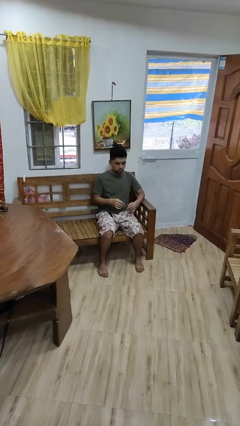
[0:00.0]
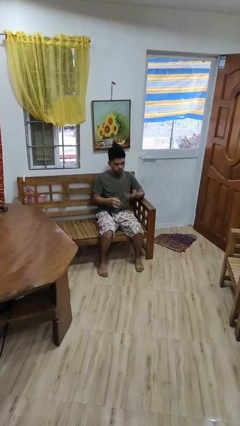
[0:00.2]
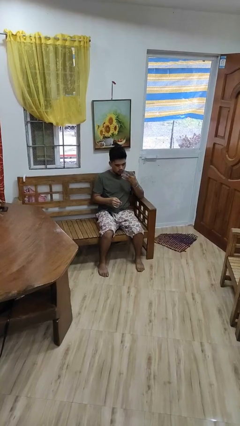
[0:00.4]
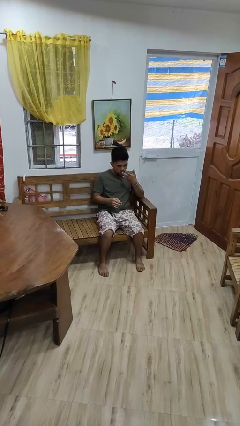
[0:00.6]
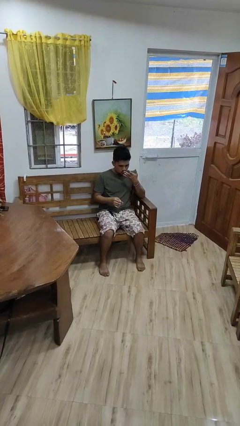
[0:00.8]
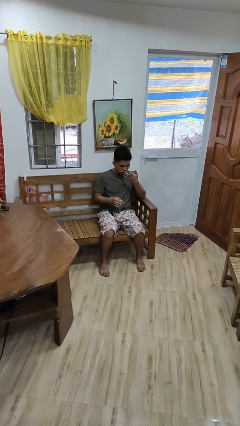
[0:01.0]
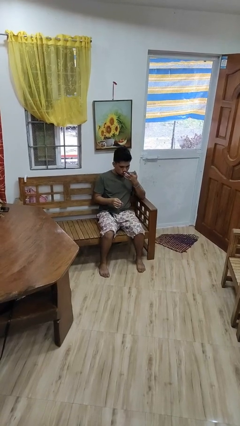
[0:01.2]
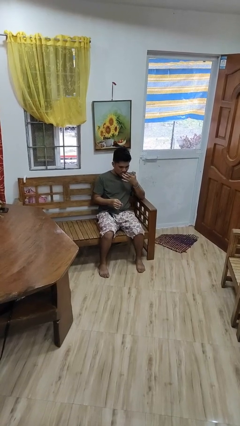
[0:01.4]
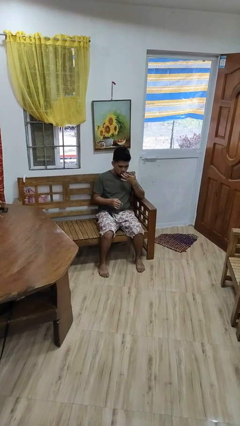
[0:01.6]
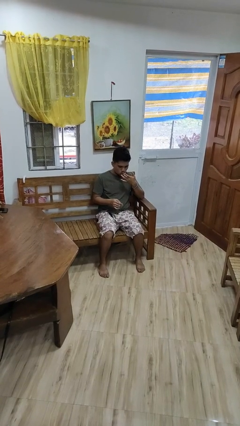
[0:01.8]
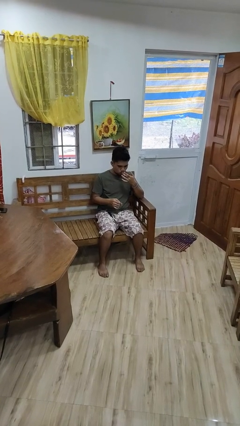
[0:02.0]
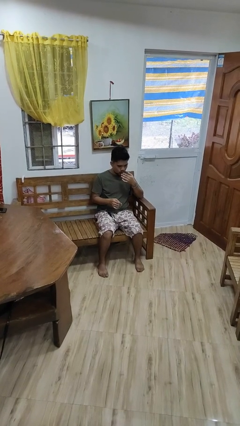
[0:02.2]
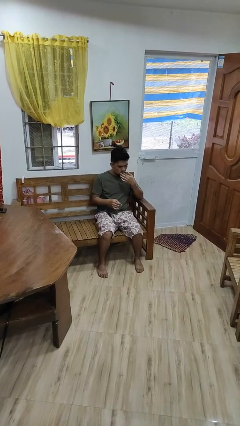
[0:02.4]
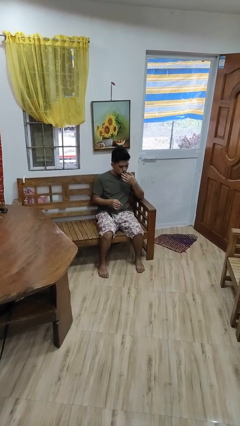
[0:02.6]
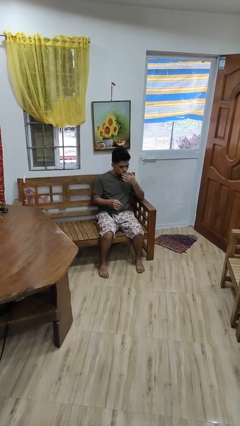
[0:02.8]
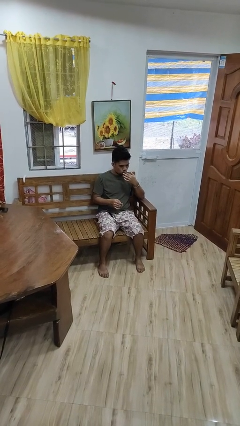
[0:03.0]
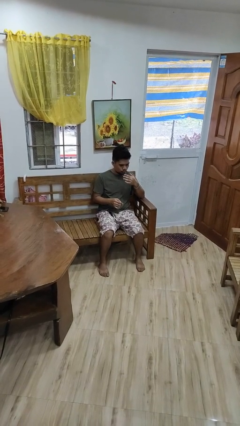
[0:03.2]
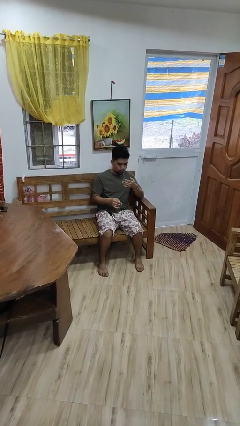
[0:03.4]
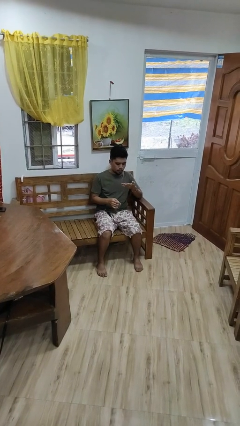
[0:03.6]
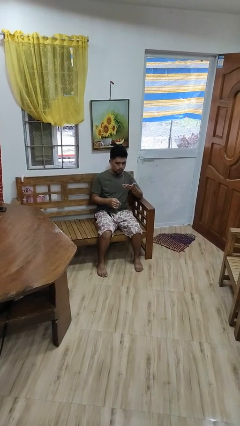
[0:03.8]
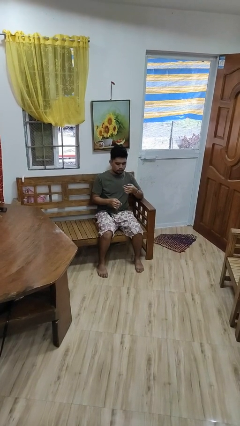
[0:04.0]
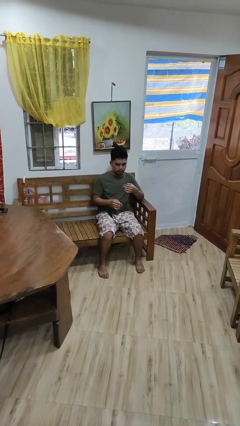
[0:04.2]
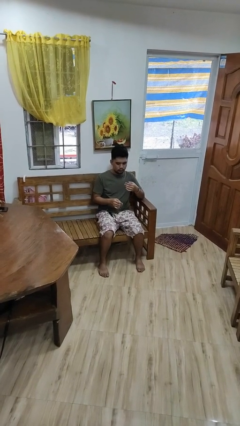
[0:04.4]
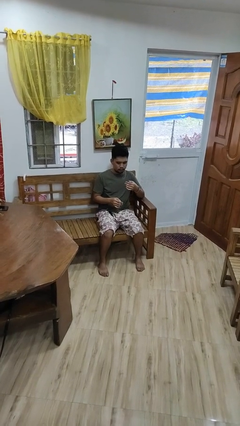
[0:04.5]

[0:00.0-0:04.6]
person licks fingers

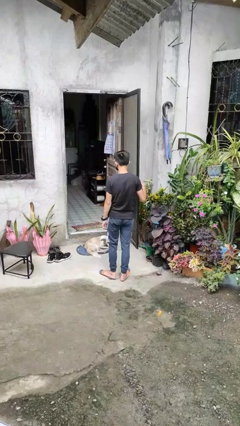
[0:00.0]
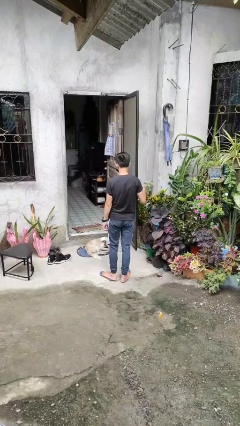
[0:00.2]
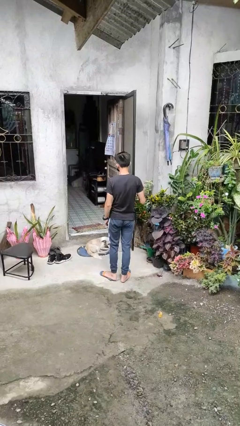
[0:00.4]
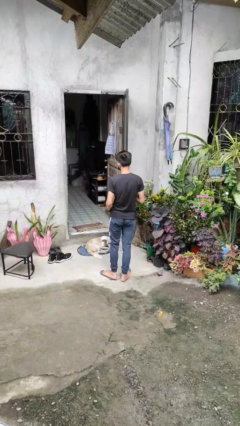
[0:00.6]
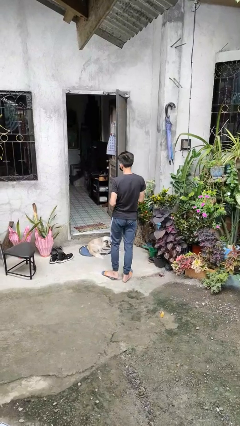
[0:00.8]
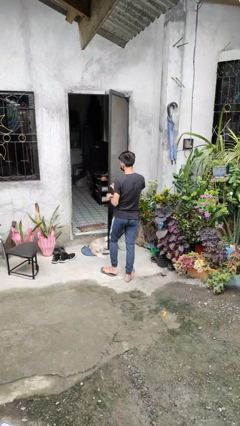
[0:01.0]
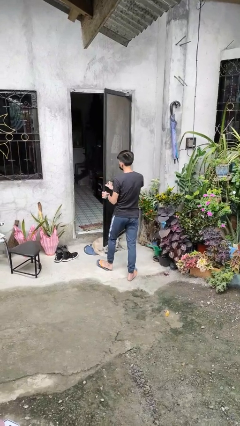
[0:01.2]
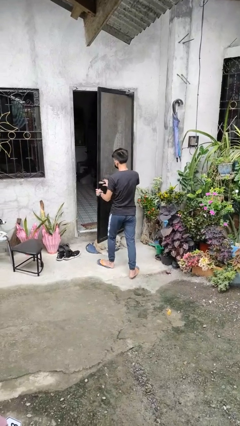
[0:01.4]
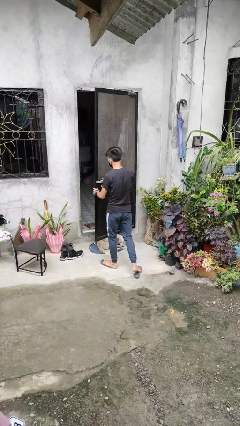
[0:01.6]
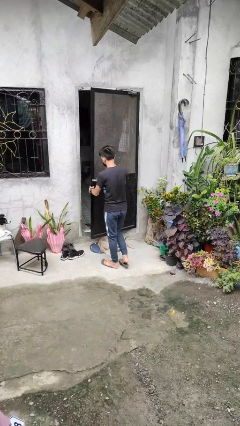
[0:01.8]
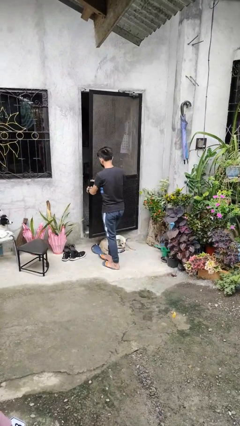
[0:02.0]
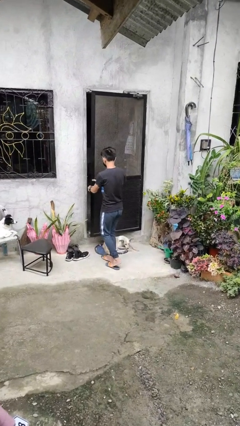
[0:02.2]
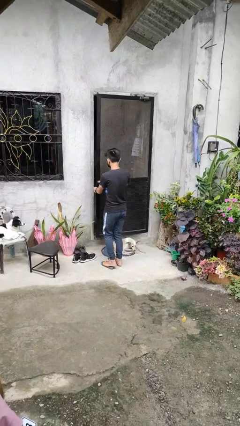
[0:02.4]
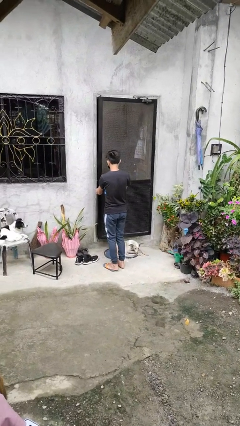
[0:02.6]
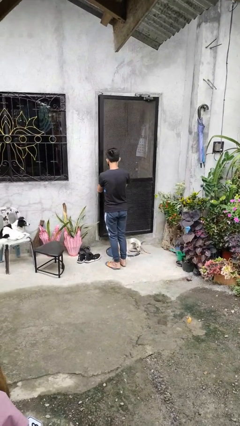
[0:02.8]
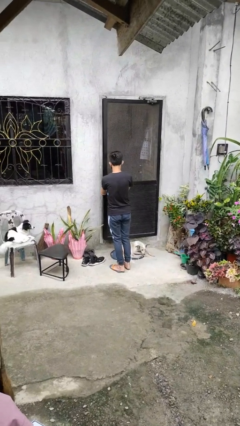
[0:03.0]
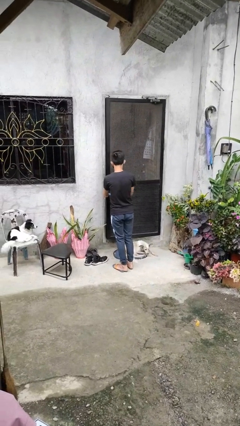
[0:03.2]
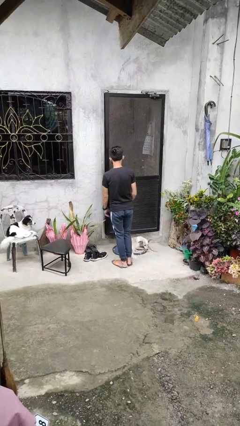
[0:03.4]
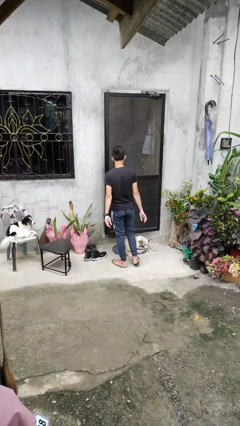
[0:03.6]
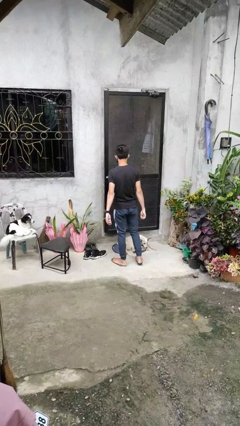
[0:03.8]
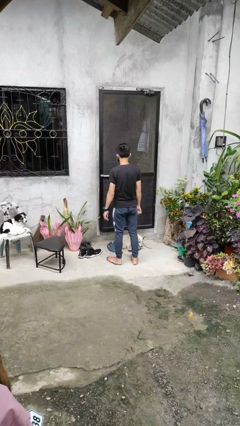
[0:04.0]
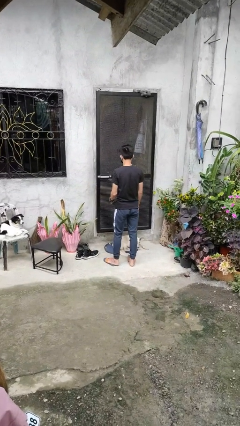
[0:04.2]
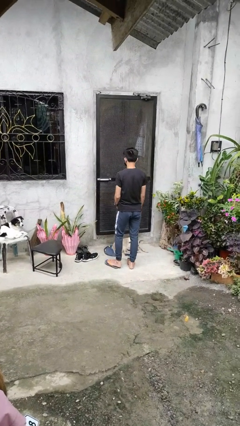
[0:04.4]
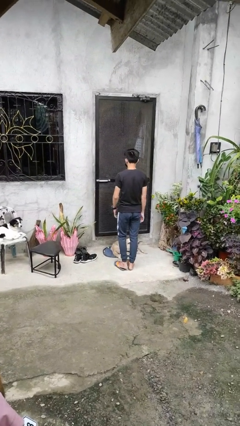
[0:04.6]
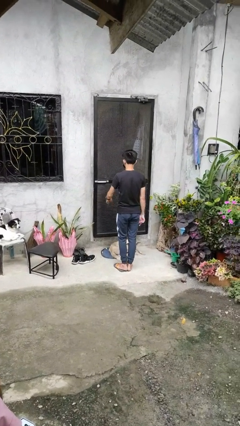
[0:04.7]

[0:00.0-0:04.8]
person closes facility door

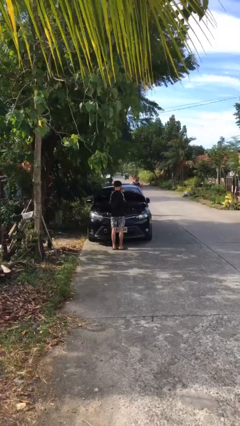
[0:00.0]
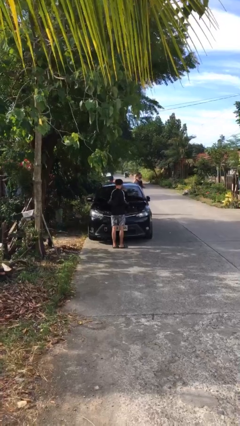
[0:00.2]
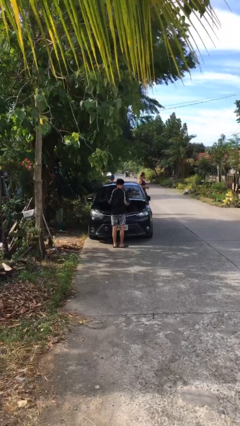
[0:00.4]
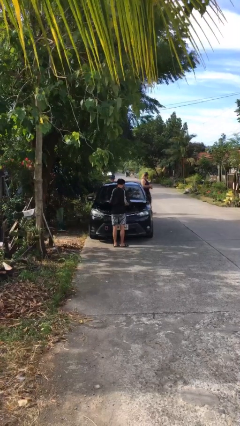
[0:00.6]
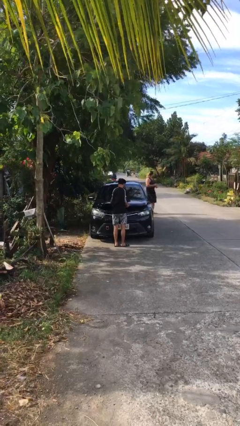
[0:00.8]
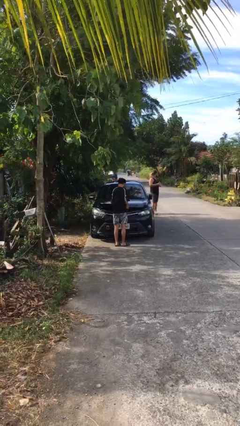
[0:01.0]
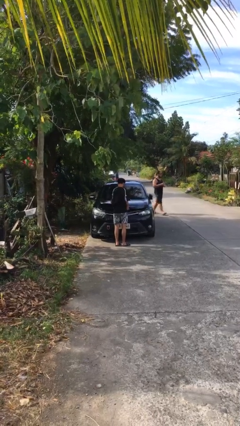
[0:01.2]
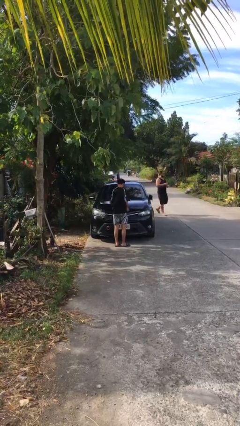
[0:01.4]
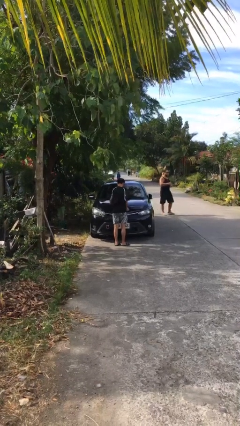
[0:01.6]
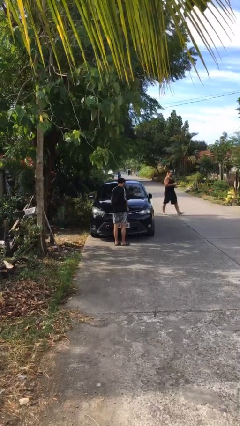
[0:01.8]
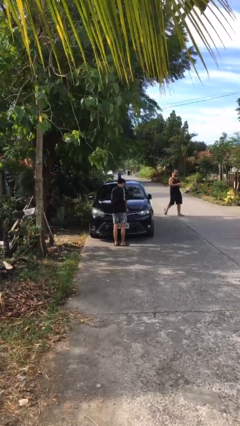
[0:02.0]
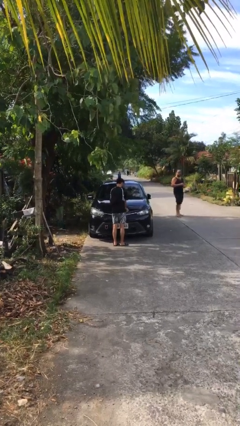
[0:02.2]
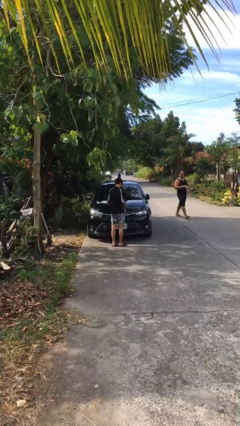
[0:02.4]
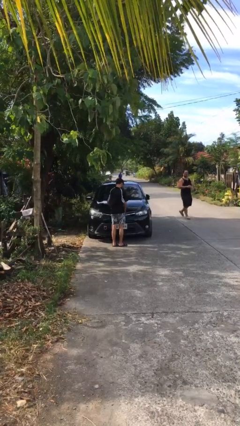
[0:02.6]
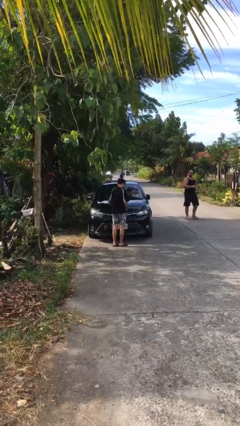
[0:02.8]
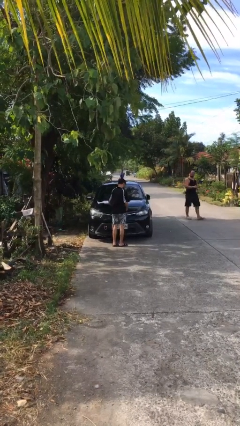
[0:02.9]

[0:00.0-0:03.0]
person closes car hood

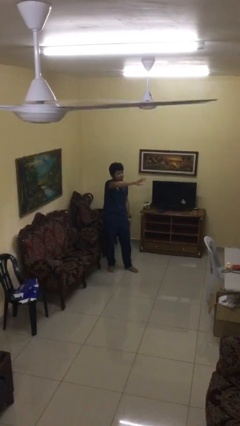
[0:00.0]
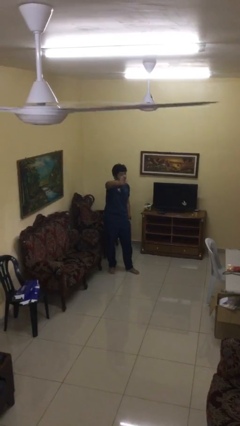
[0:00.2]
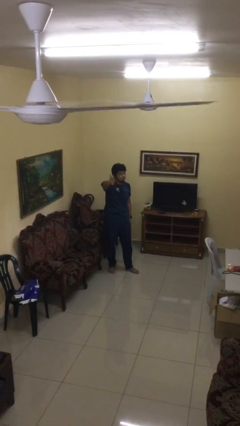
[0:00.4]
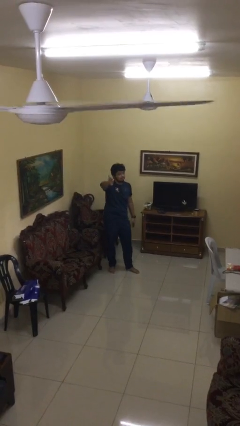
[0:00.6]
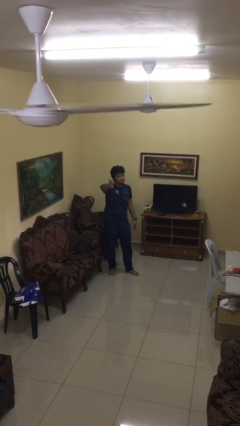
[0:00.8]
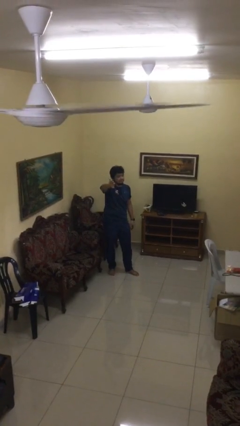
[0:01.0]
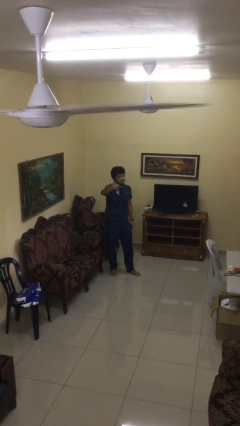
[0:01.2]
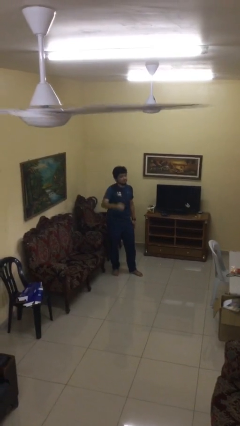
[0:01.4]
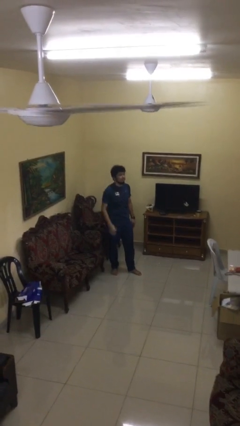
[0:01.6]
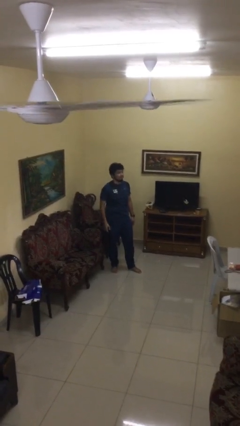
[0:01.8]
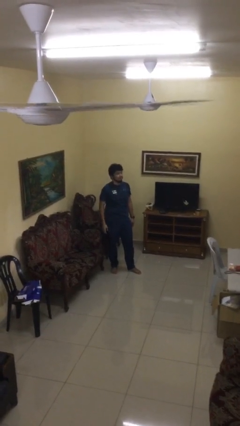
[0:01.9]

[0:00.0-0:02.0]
person gestures swipe right

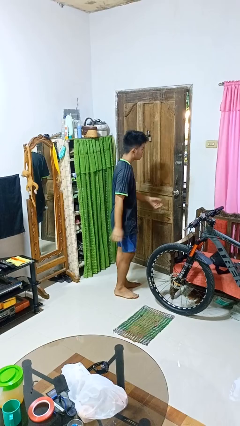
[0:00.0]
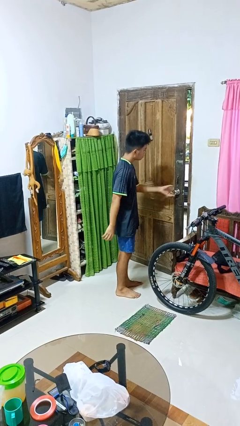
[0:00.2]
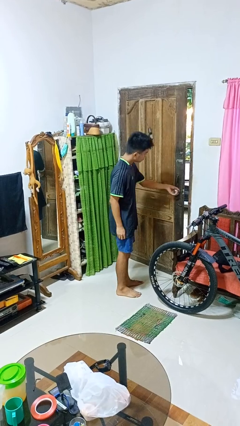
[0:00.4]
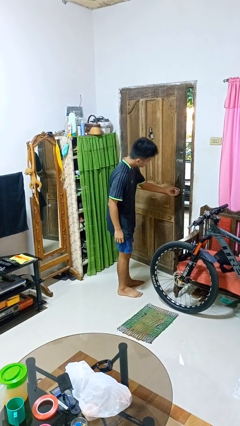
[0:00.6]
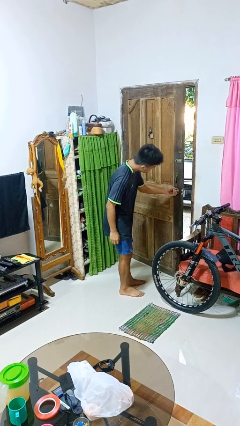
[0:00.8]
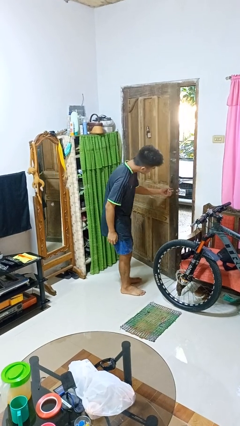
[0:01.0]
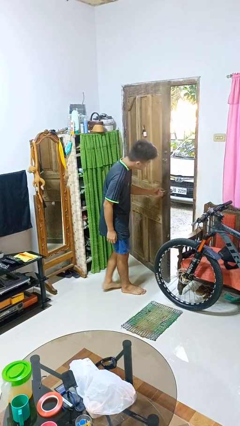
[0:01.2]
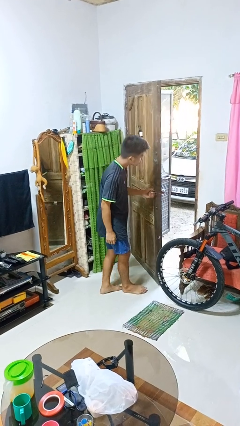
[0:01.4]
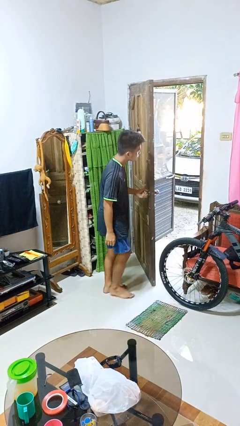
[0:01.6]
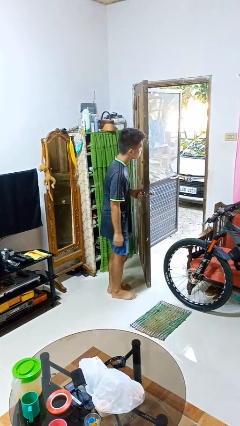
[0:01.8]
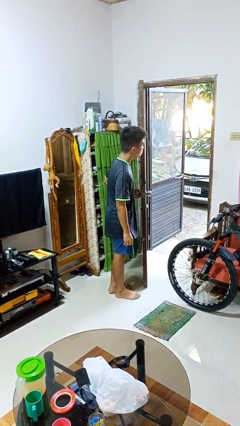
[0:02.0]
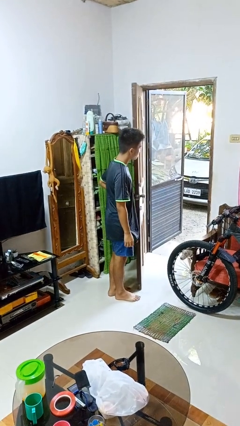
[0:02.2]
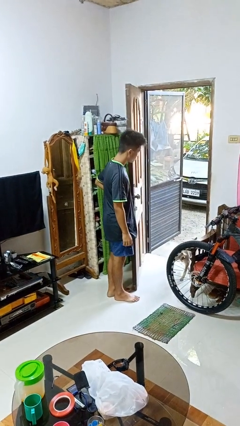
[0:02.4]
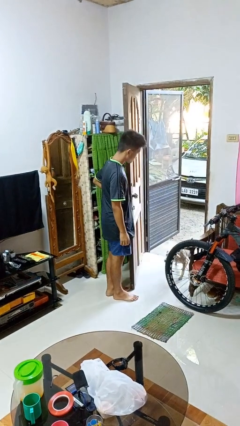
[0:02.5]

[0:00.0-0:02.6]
person opens facility door
